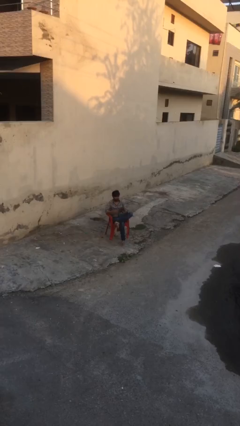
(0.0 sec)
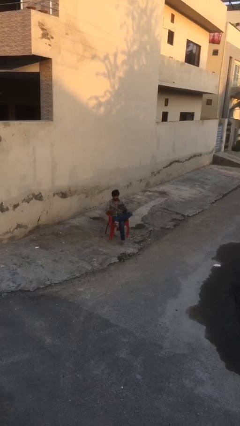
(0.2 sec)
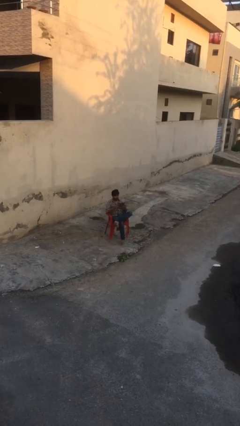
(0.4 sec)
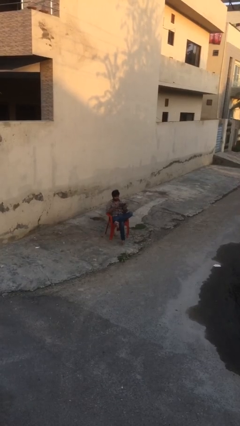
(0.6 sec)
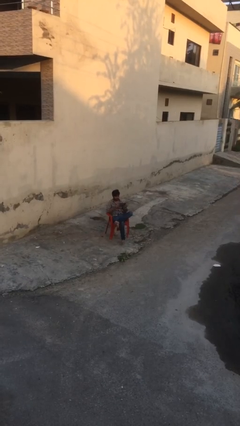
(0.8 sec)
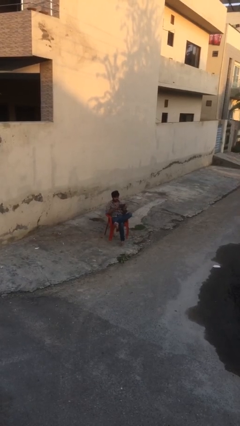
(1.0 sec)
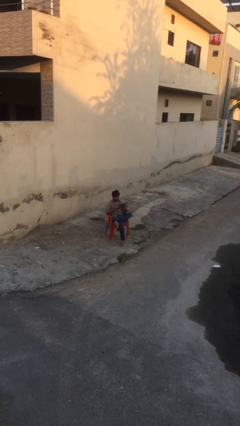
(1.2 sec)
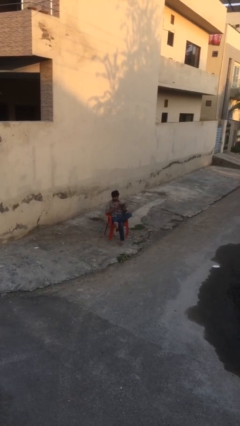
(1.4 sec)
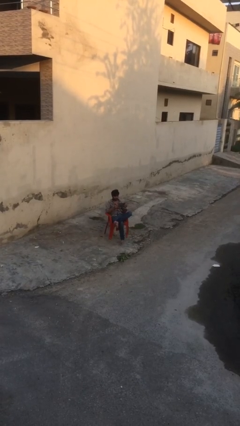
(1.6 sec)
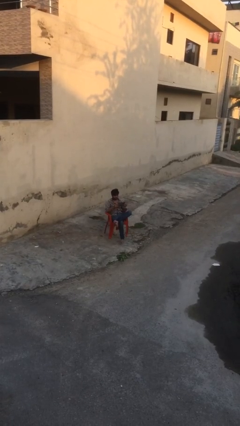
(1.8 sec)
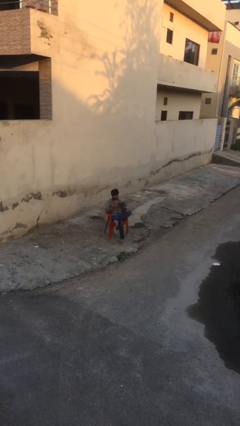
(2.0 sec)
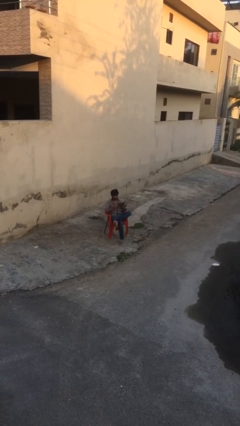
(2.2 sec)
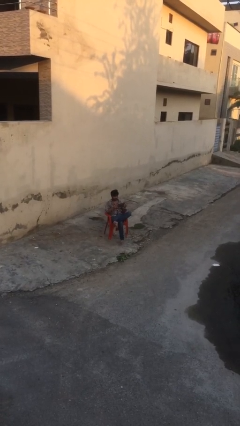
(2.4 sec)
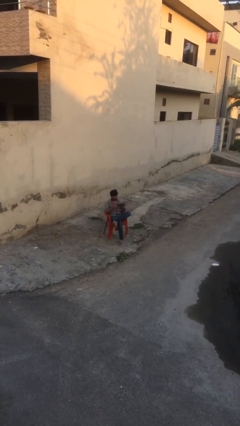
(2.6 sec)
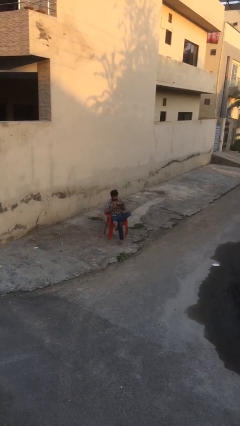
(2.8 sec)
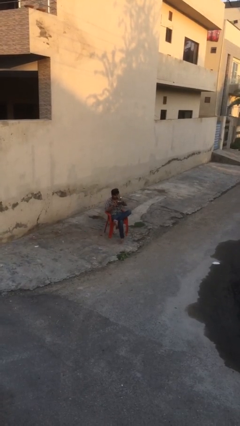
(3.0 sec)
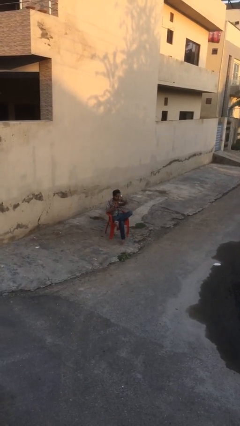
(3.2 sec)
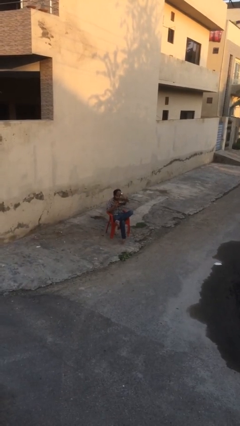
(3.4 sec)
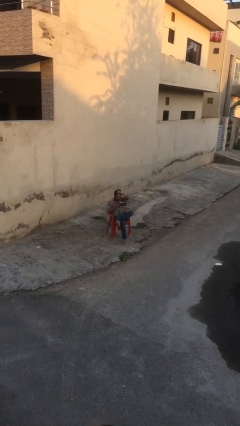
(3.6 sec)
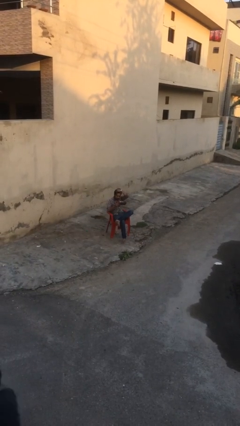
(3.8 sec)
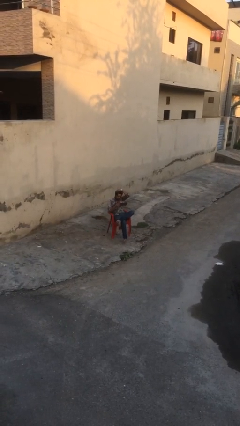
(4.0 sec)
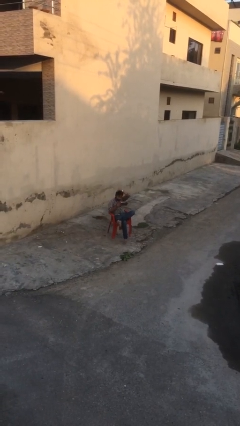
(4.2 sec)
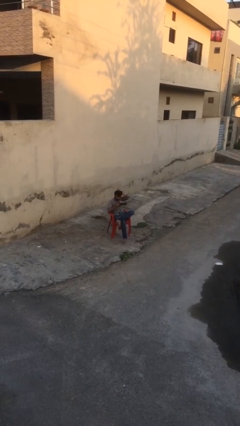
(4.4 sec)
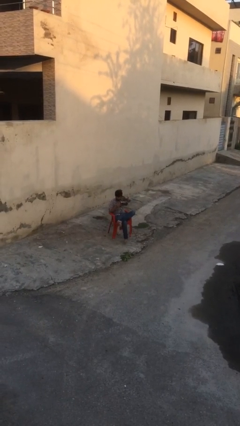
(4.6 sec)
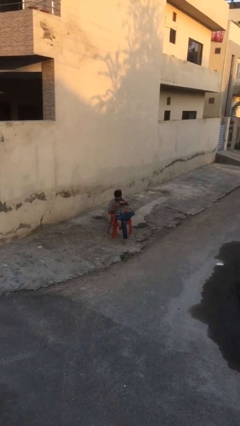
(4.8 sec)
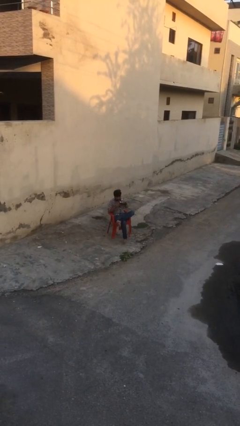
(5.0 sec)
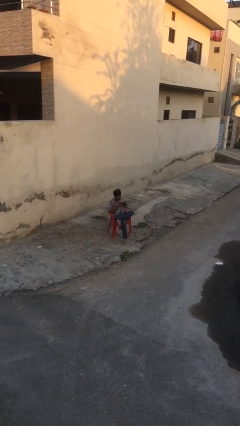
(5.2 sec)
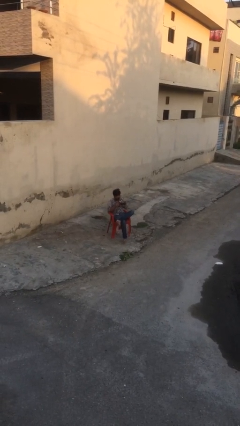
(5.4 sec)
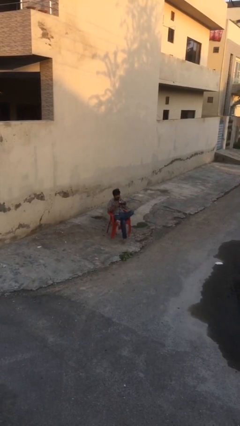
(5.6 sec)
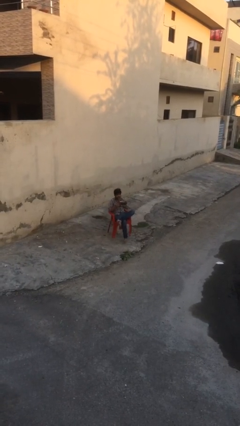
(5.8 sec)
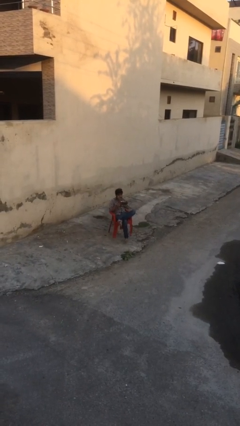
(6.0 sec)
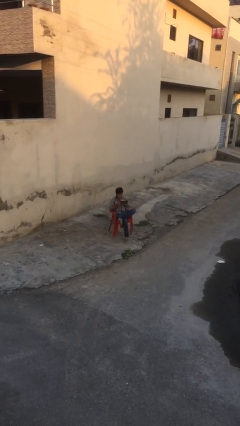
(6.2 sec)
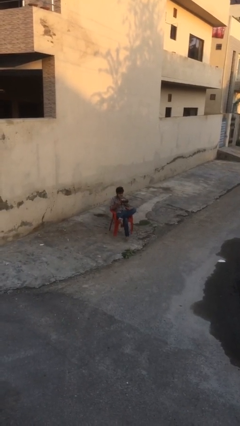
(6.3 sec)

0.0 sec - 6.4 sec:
person reads document

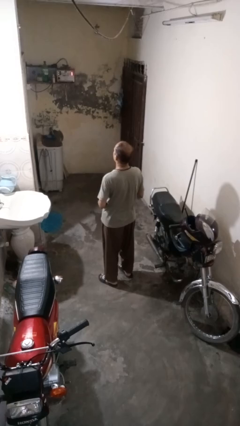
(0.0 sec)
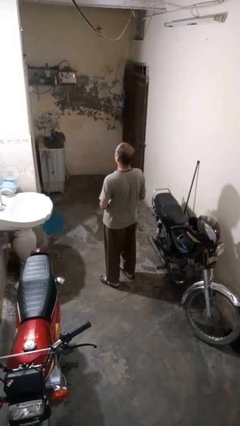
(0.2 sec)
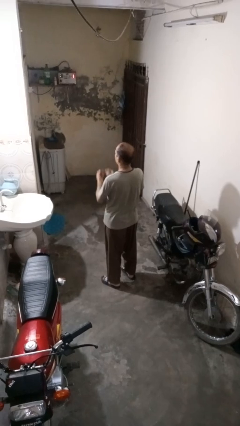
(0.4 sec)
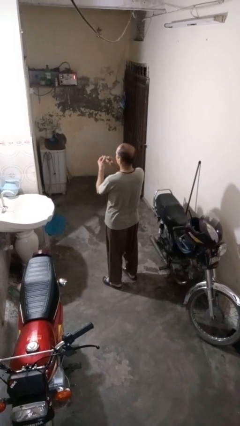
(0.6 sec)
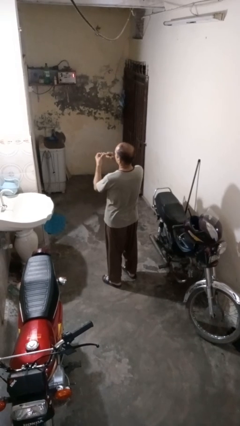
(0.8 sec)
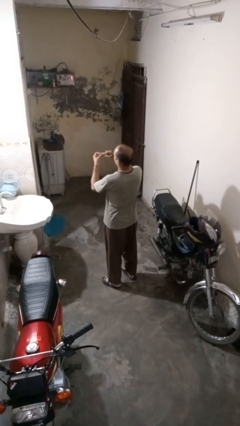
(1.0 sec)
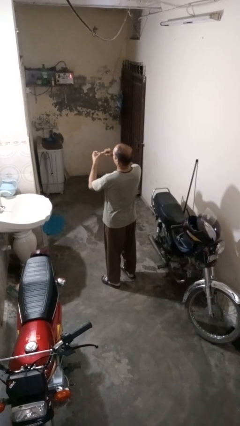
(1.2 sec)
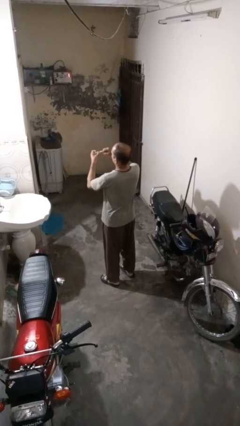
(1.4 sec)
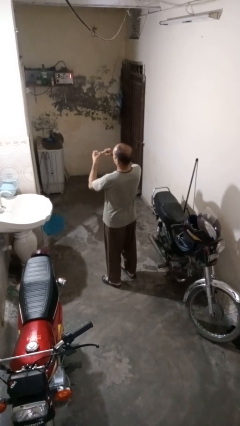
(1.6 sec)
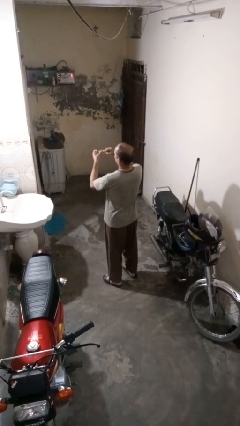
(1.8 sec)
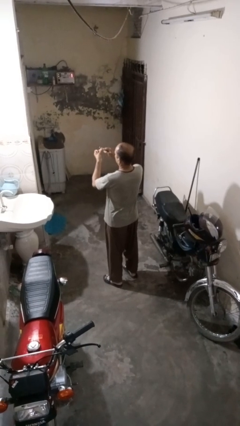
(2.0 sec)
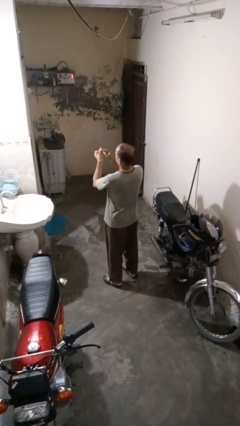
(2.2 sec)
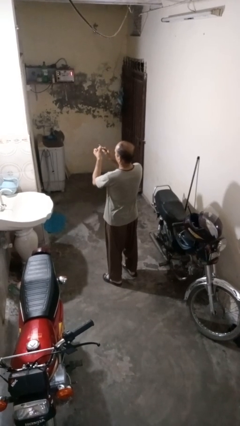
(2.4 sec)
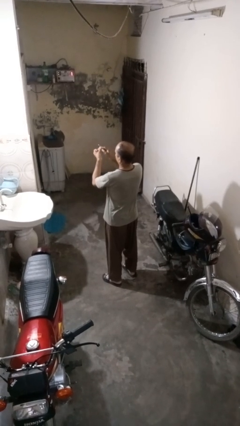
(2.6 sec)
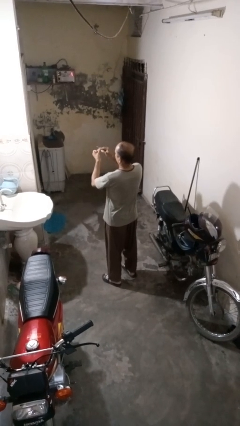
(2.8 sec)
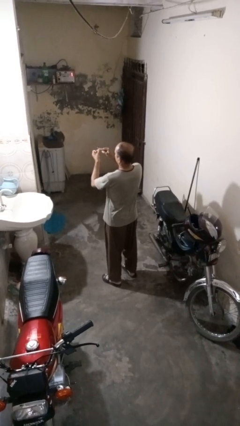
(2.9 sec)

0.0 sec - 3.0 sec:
person files fingernails

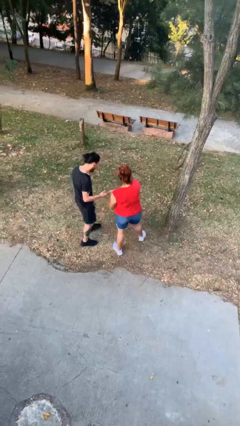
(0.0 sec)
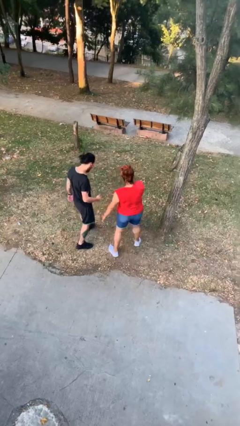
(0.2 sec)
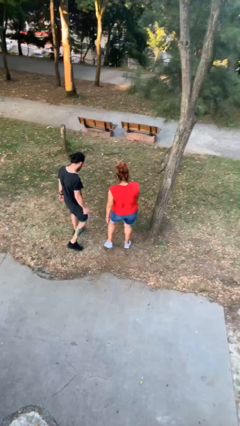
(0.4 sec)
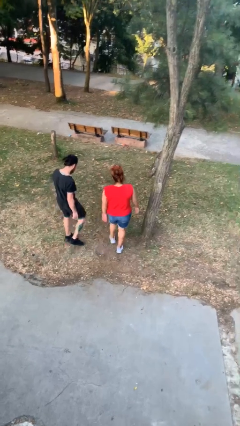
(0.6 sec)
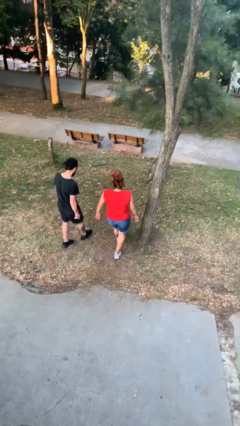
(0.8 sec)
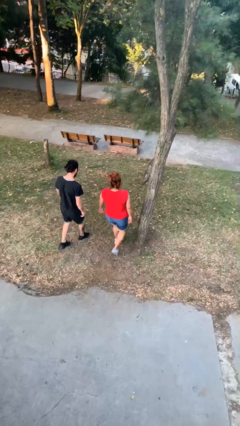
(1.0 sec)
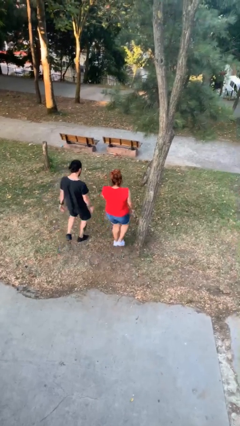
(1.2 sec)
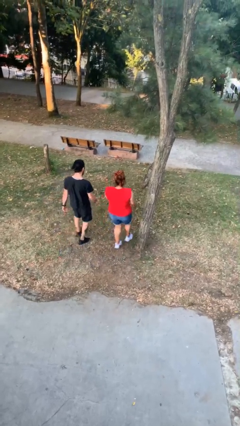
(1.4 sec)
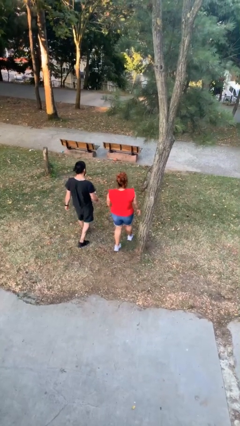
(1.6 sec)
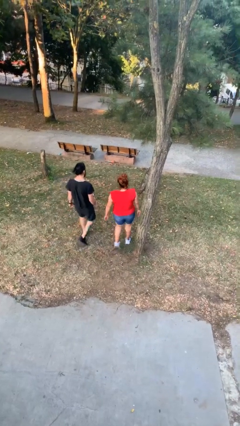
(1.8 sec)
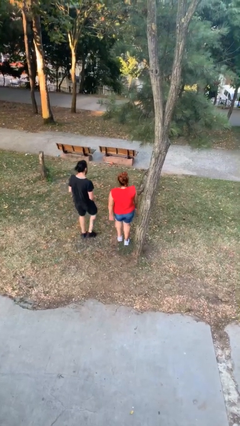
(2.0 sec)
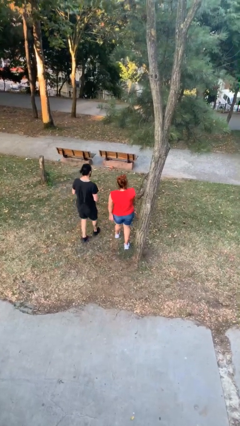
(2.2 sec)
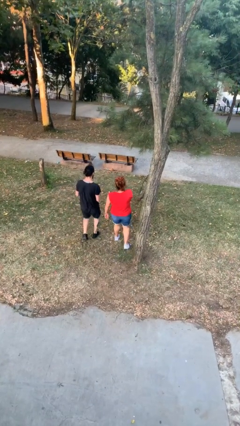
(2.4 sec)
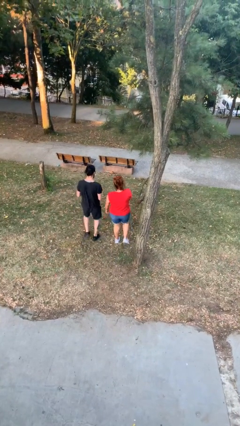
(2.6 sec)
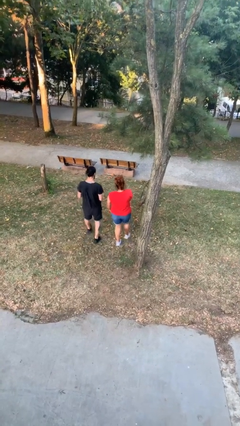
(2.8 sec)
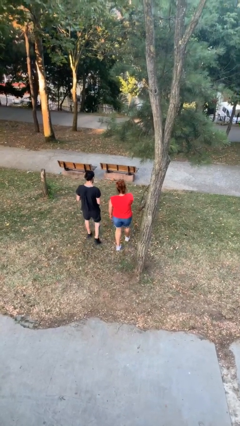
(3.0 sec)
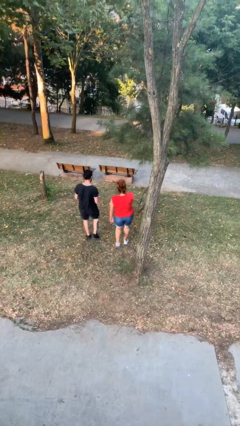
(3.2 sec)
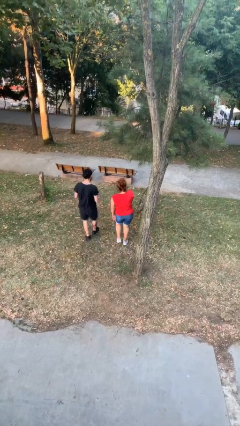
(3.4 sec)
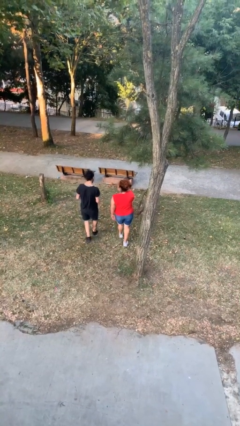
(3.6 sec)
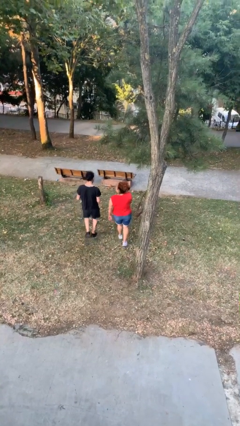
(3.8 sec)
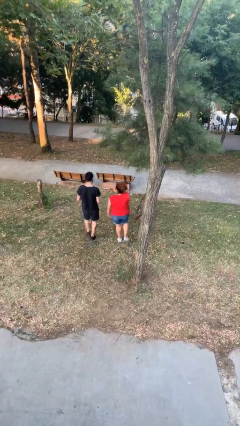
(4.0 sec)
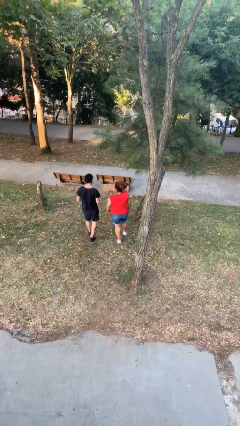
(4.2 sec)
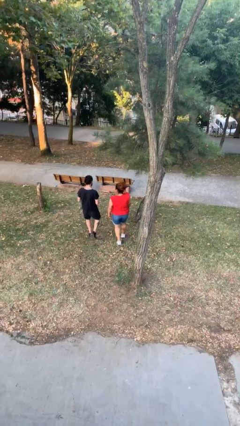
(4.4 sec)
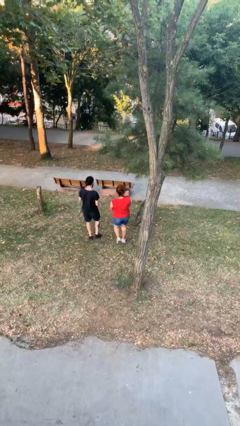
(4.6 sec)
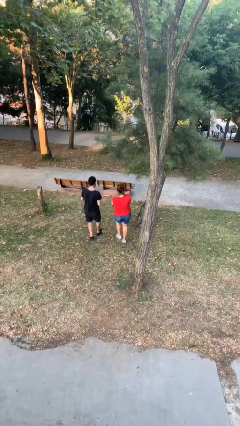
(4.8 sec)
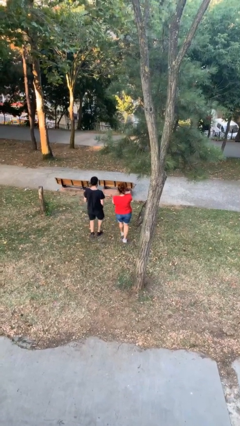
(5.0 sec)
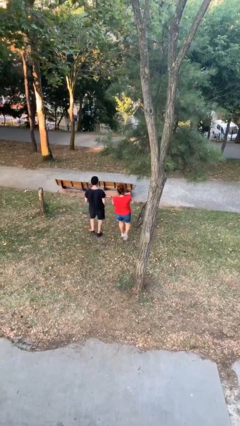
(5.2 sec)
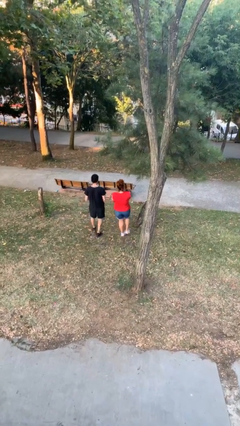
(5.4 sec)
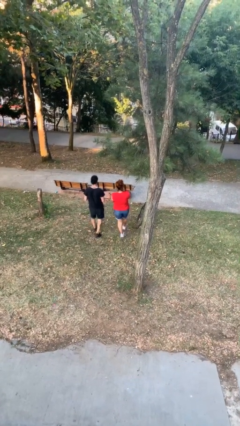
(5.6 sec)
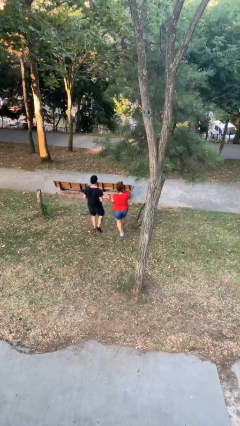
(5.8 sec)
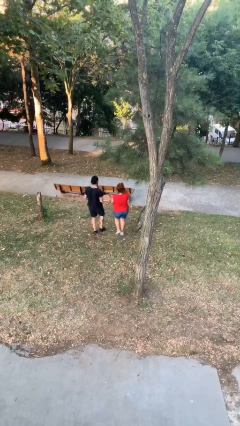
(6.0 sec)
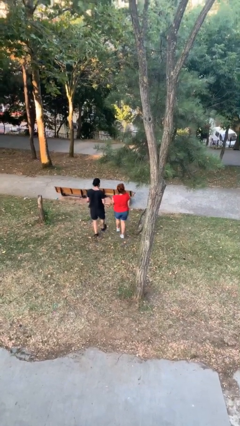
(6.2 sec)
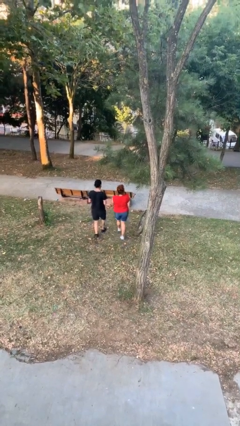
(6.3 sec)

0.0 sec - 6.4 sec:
person talks to person

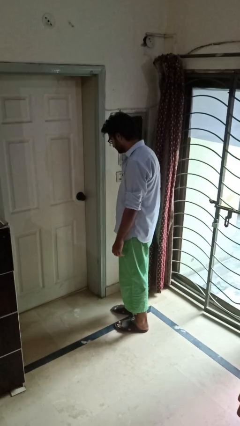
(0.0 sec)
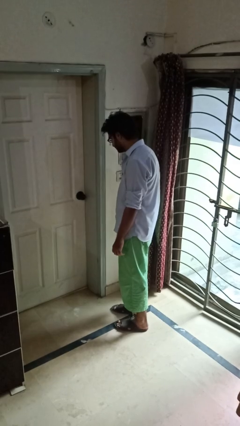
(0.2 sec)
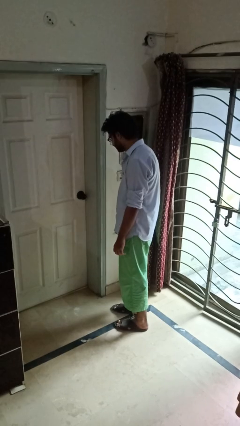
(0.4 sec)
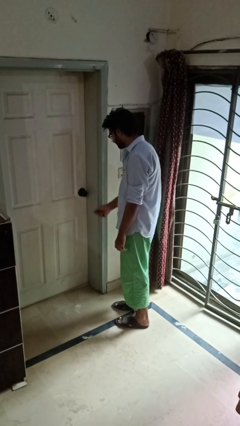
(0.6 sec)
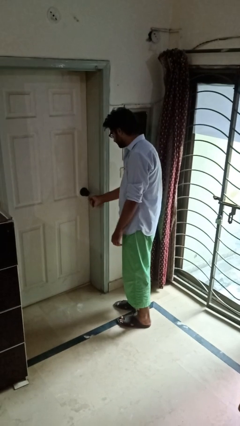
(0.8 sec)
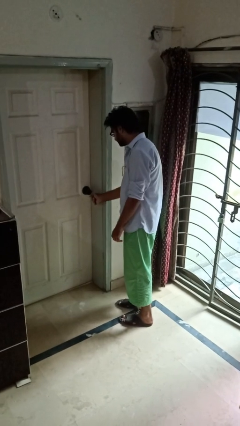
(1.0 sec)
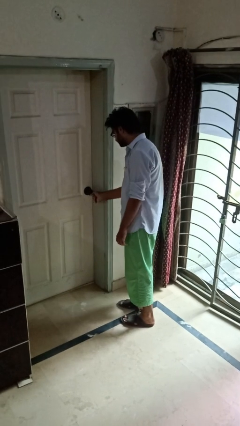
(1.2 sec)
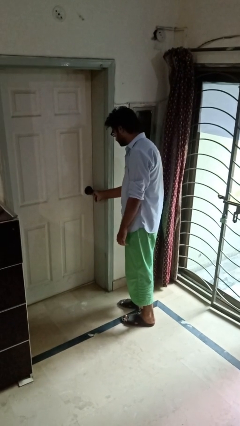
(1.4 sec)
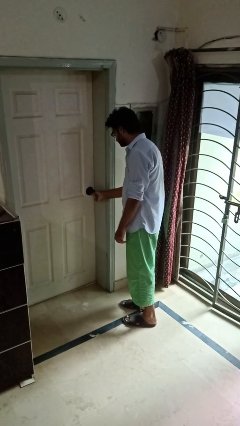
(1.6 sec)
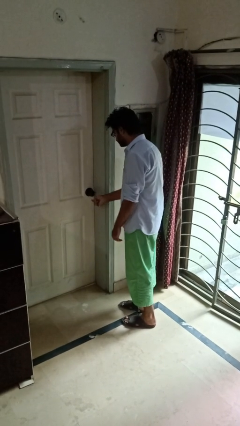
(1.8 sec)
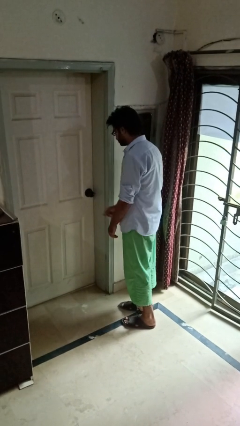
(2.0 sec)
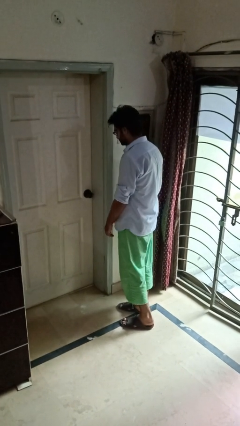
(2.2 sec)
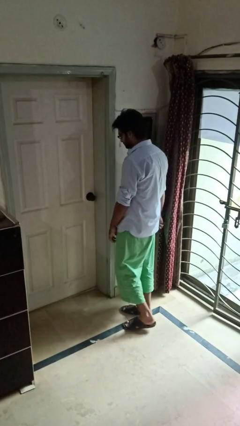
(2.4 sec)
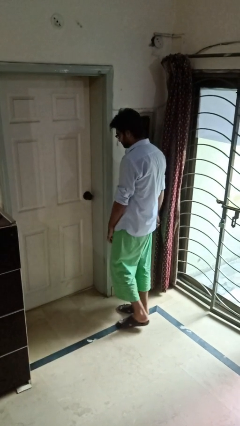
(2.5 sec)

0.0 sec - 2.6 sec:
person unlocks door with keys
